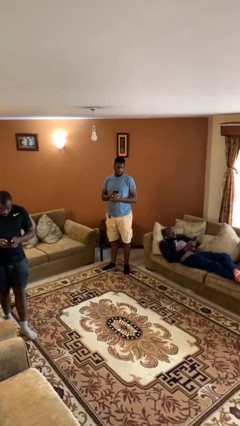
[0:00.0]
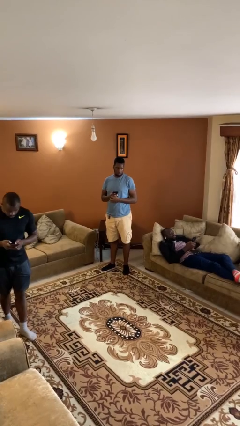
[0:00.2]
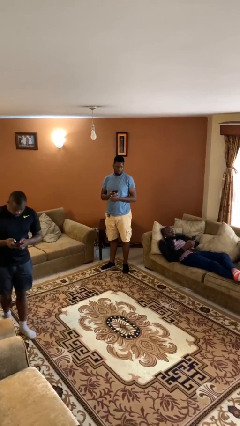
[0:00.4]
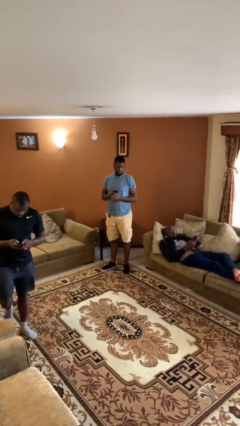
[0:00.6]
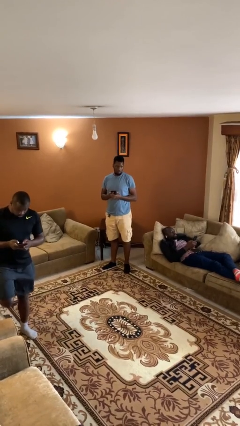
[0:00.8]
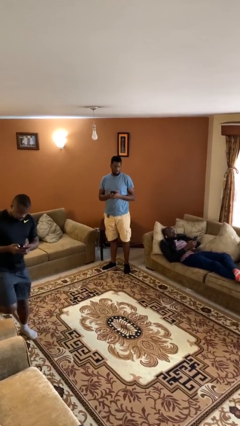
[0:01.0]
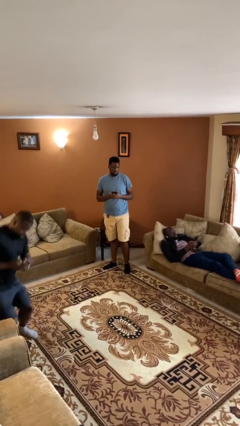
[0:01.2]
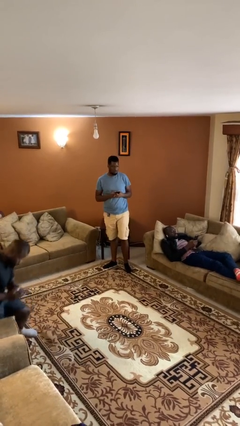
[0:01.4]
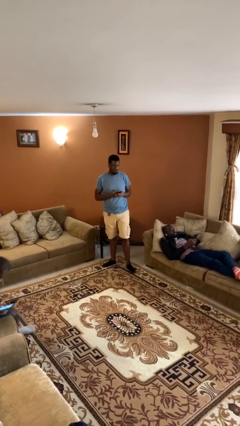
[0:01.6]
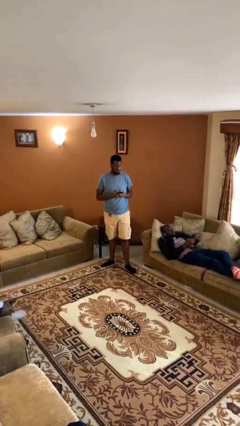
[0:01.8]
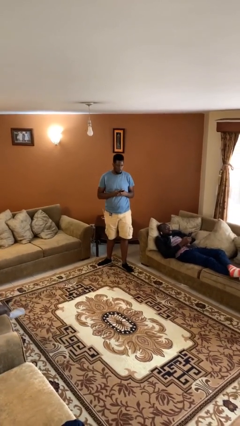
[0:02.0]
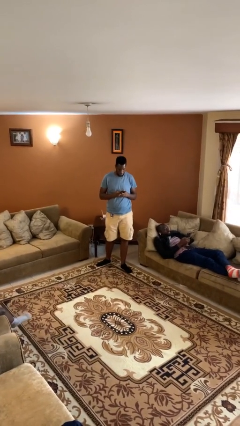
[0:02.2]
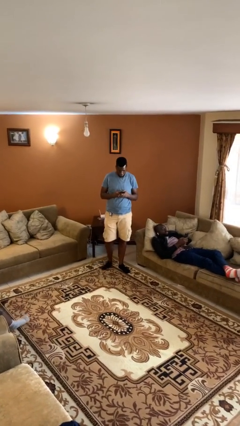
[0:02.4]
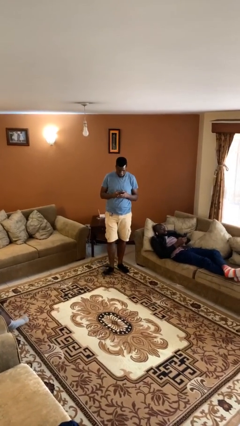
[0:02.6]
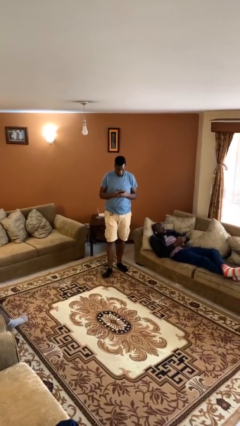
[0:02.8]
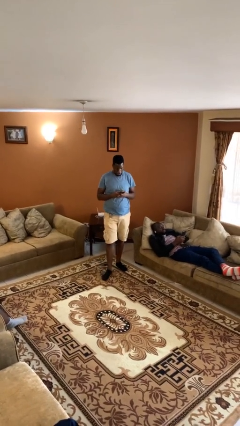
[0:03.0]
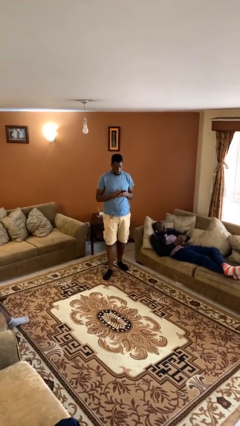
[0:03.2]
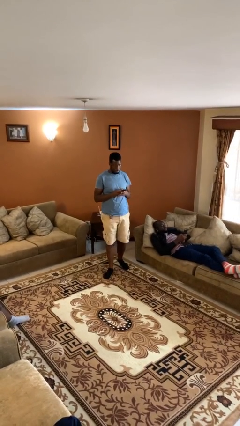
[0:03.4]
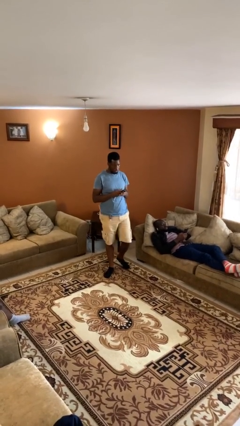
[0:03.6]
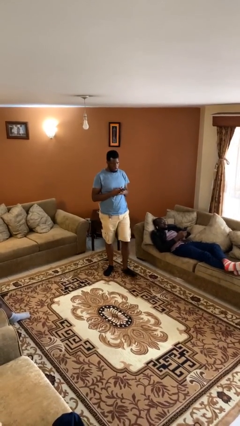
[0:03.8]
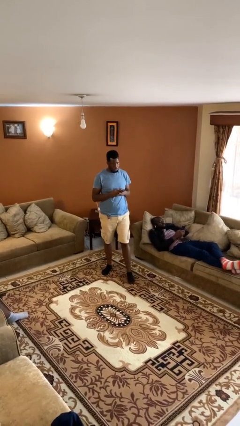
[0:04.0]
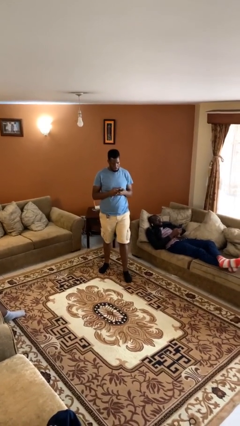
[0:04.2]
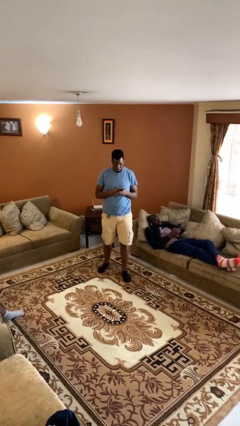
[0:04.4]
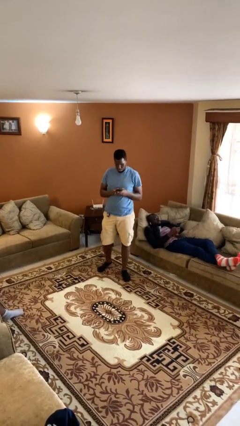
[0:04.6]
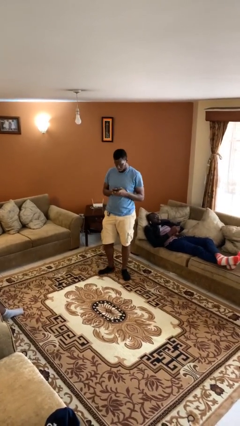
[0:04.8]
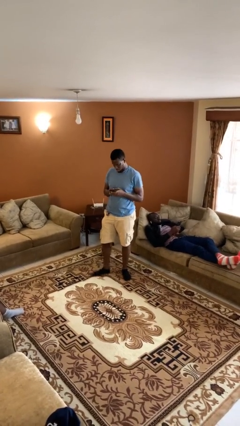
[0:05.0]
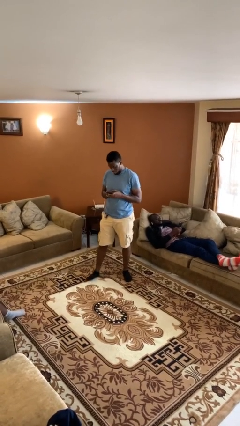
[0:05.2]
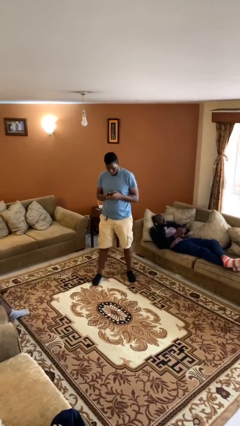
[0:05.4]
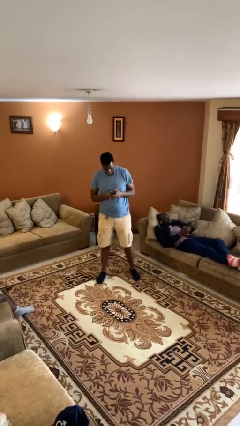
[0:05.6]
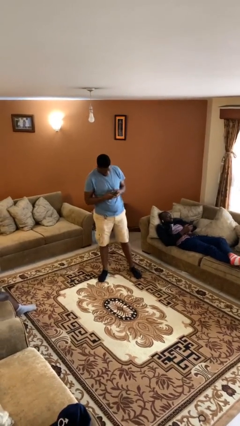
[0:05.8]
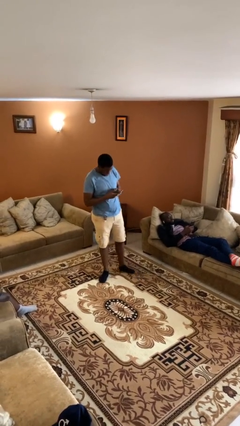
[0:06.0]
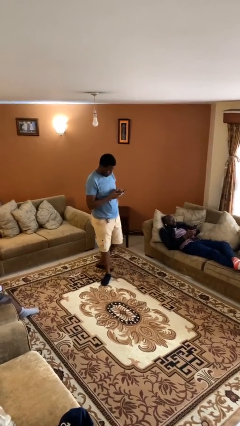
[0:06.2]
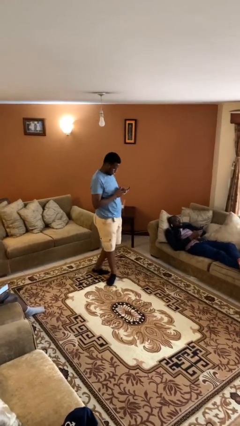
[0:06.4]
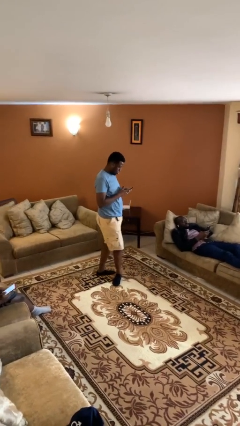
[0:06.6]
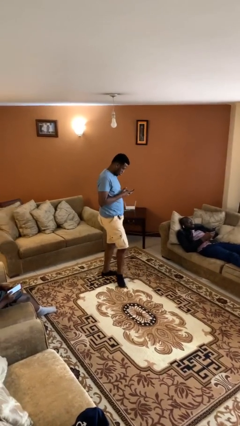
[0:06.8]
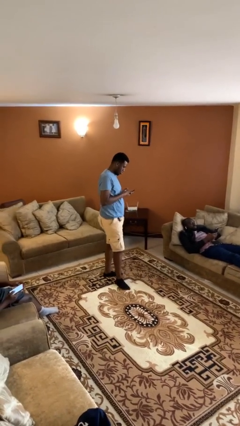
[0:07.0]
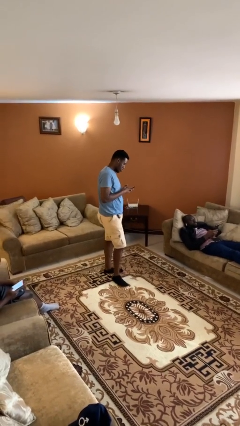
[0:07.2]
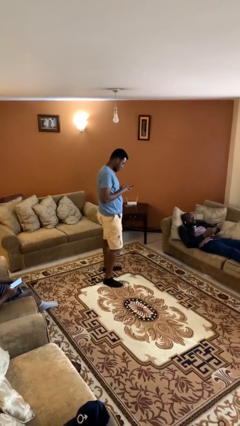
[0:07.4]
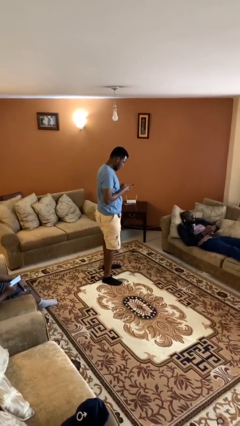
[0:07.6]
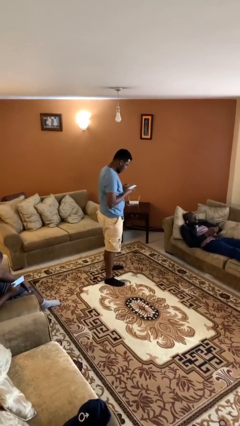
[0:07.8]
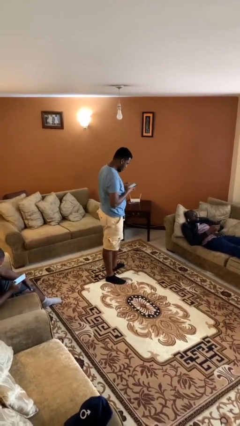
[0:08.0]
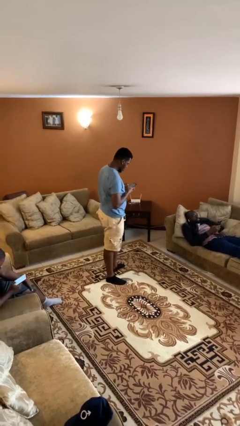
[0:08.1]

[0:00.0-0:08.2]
person texts on phone

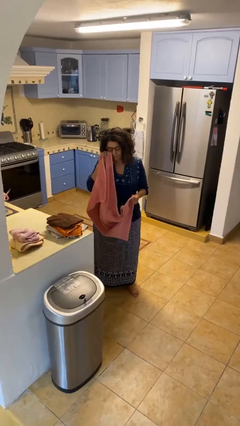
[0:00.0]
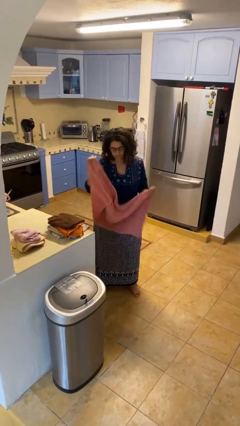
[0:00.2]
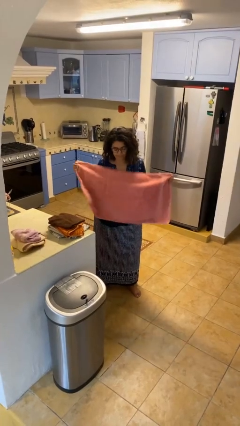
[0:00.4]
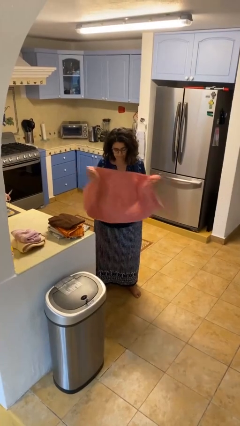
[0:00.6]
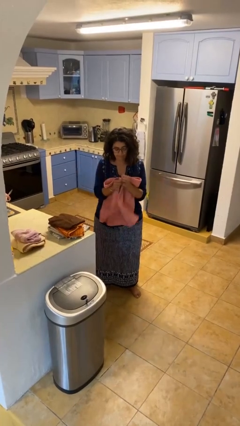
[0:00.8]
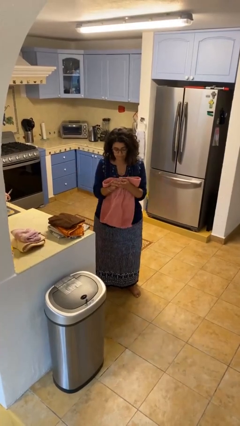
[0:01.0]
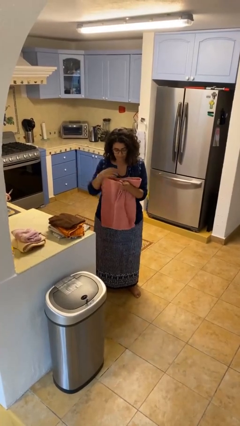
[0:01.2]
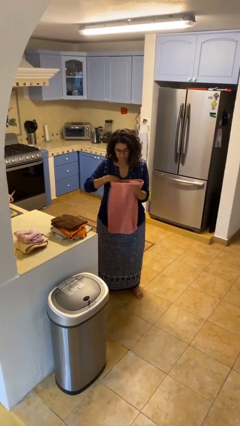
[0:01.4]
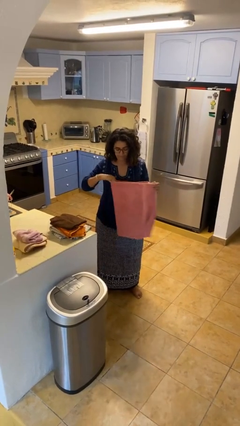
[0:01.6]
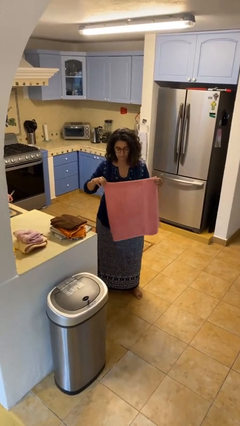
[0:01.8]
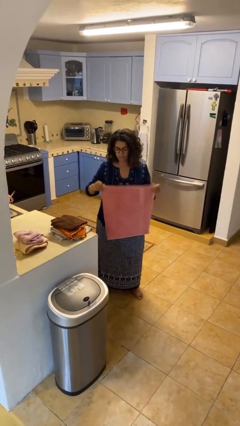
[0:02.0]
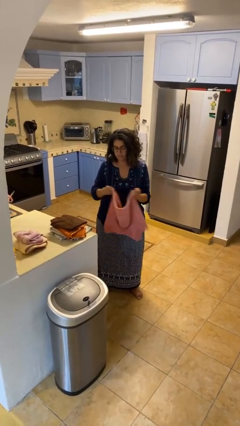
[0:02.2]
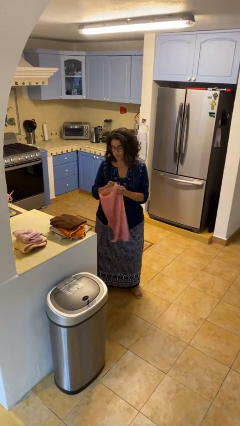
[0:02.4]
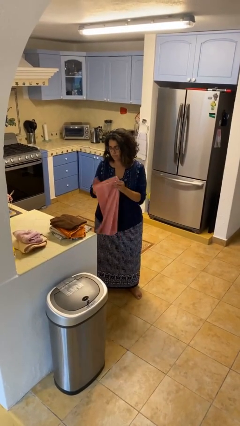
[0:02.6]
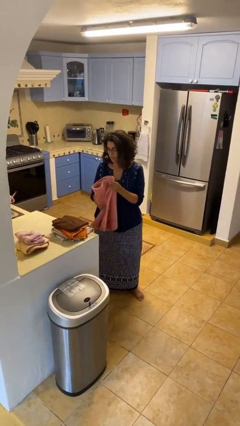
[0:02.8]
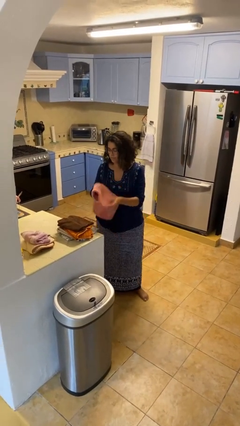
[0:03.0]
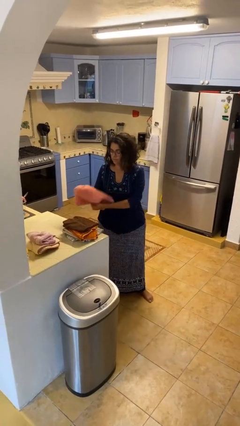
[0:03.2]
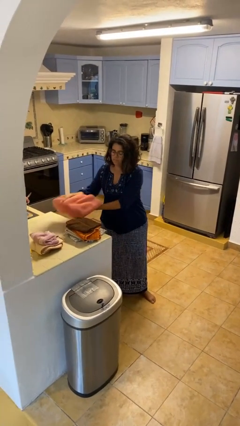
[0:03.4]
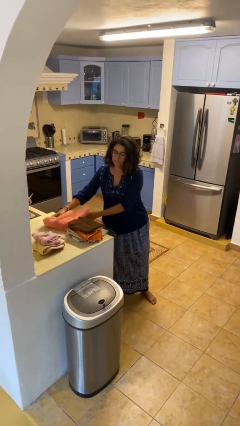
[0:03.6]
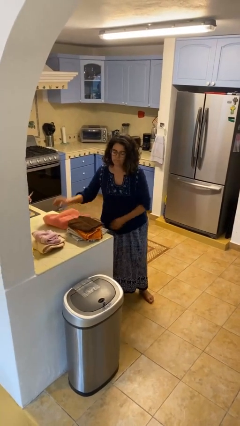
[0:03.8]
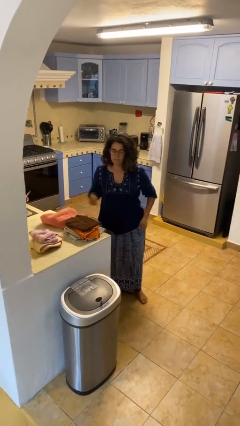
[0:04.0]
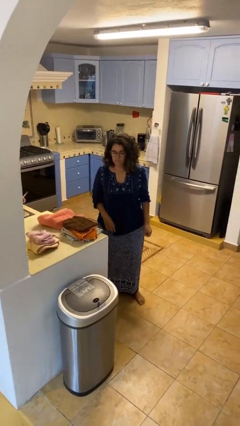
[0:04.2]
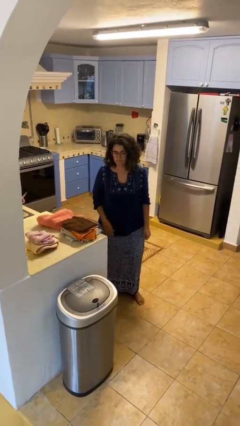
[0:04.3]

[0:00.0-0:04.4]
person folds towel

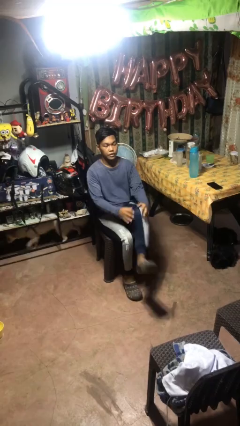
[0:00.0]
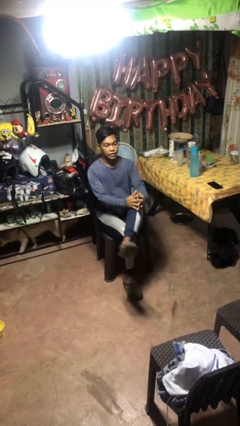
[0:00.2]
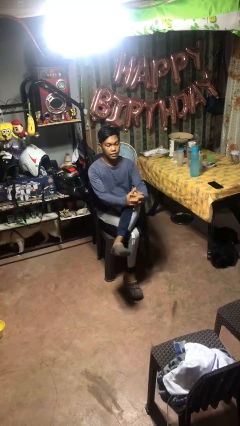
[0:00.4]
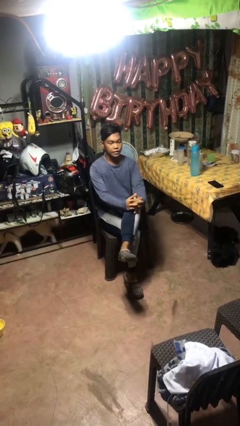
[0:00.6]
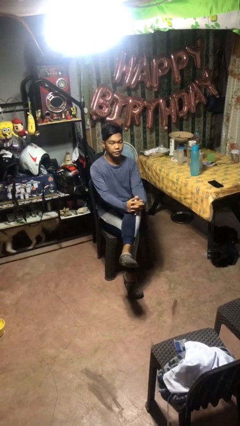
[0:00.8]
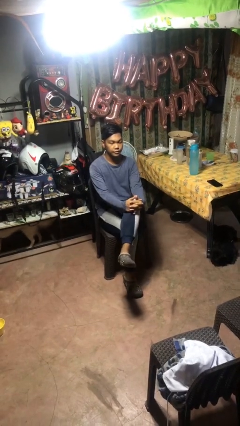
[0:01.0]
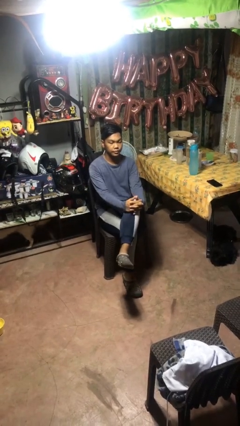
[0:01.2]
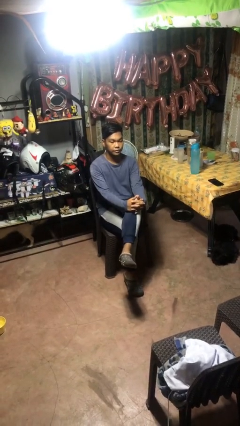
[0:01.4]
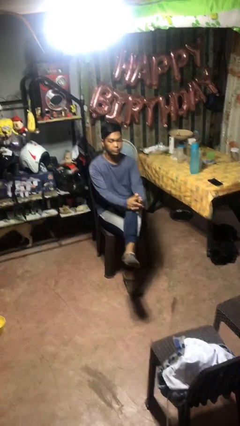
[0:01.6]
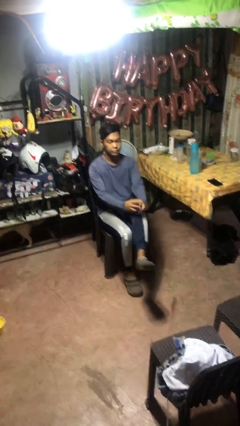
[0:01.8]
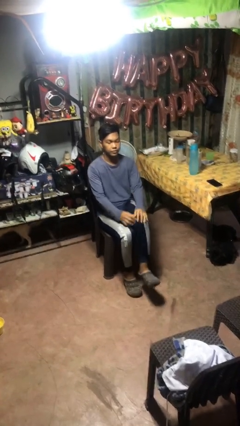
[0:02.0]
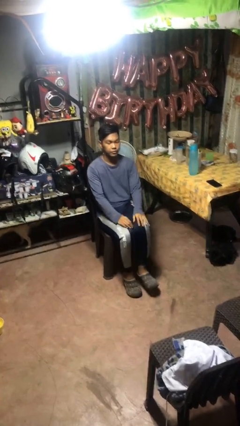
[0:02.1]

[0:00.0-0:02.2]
person crosses legs

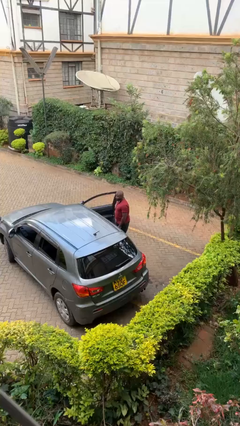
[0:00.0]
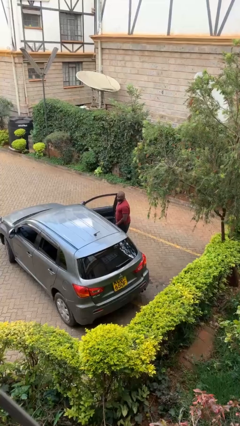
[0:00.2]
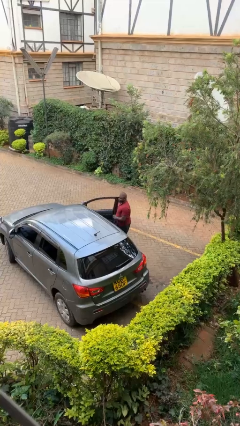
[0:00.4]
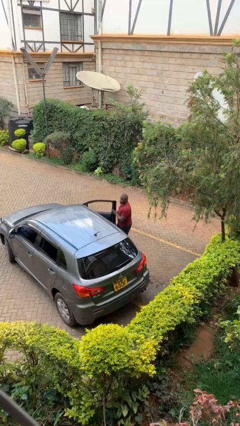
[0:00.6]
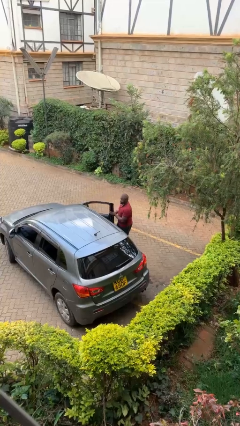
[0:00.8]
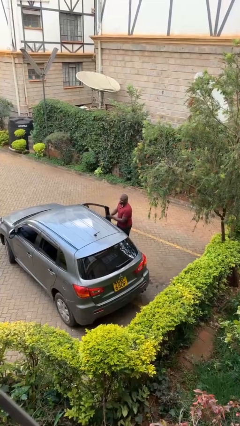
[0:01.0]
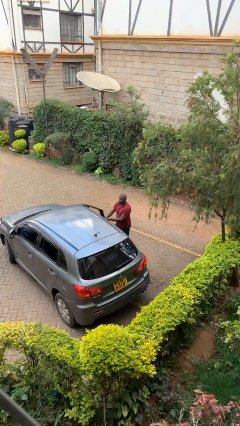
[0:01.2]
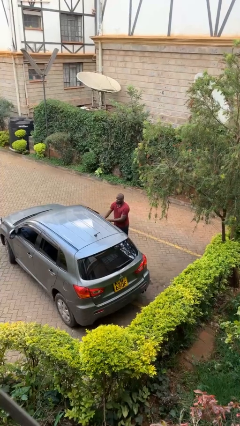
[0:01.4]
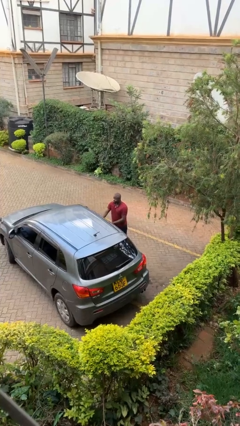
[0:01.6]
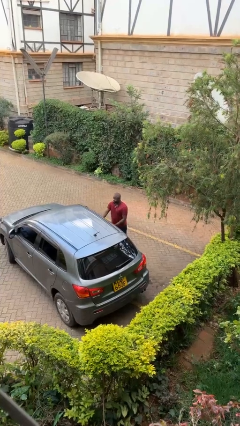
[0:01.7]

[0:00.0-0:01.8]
person closes car door

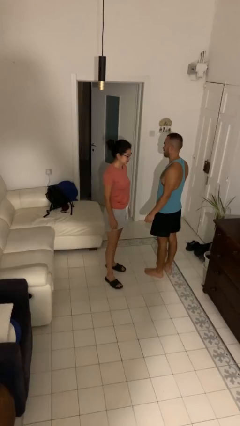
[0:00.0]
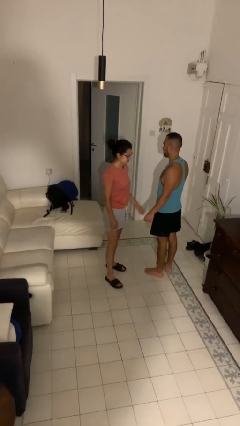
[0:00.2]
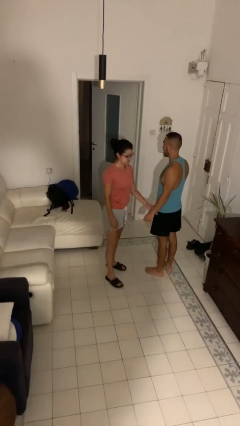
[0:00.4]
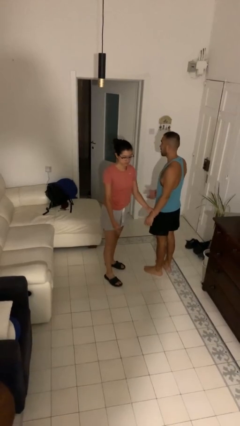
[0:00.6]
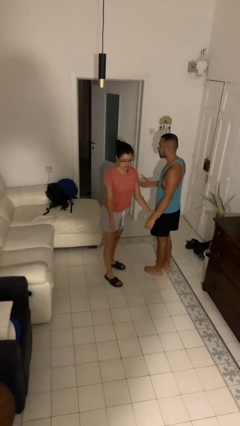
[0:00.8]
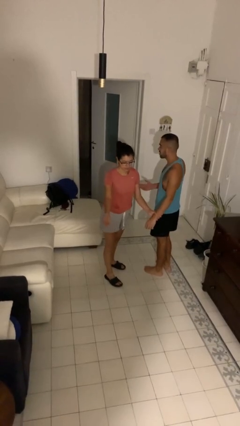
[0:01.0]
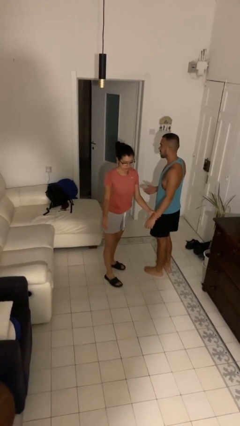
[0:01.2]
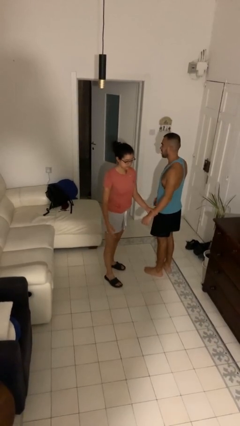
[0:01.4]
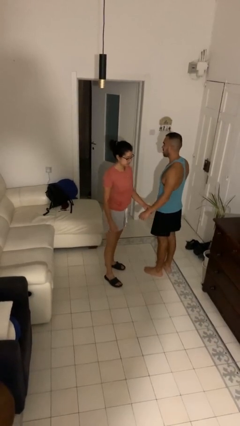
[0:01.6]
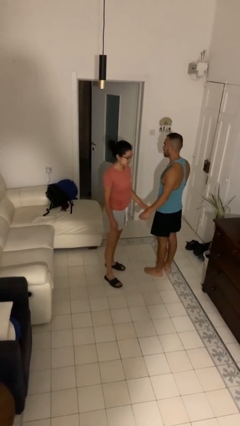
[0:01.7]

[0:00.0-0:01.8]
person grabs person by forearm
